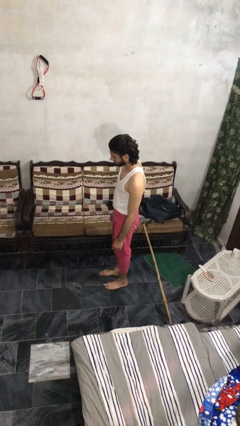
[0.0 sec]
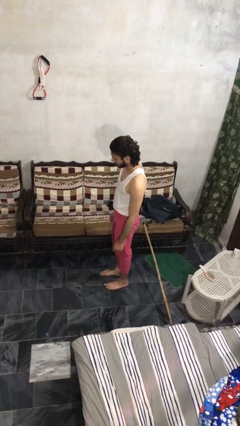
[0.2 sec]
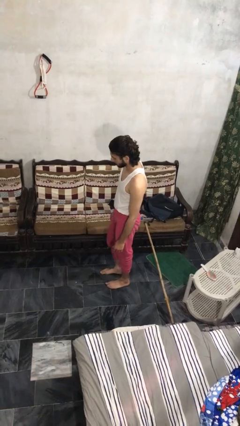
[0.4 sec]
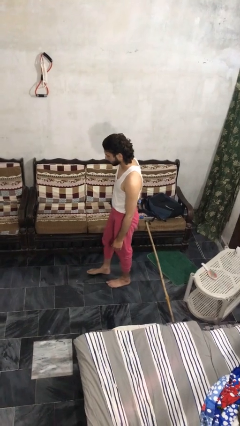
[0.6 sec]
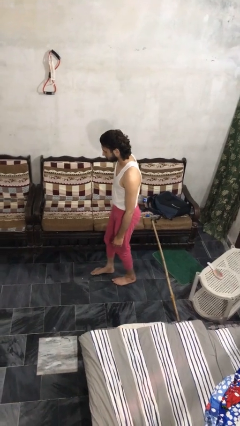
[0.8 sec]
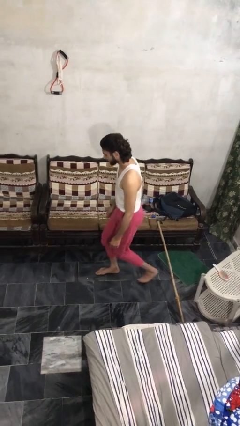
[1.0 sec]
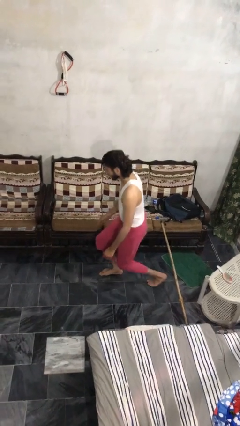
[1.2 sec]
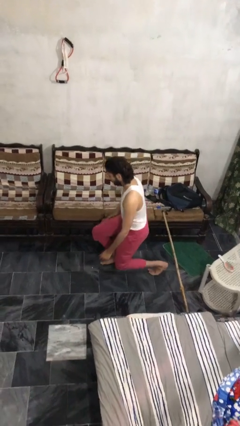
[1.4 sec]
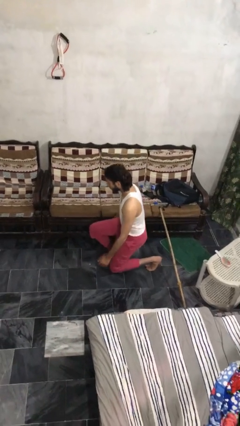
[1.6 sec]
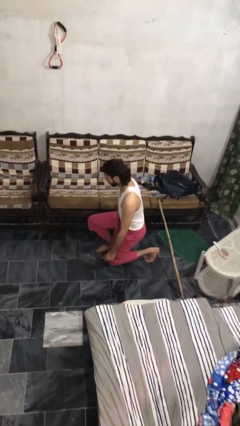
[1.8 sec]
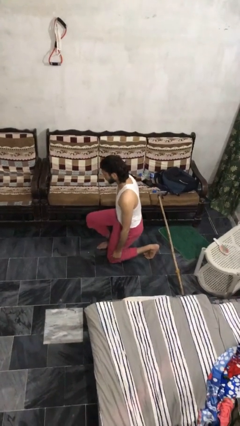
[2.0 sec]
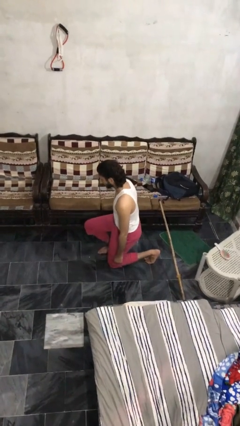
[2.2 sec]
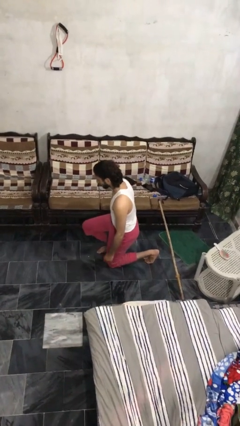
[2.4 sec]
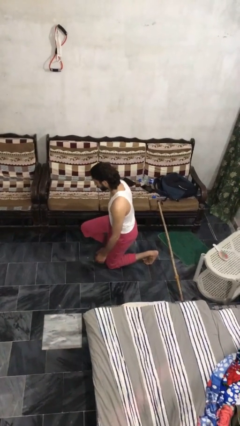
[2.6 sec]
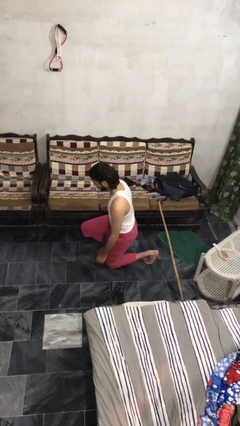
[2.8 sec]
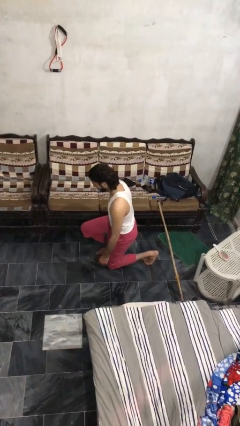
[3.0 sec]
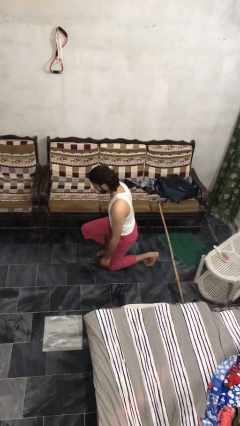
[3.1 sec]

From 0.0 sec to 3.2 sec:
person kneels

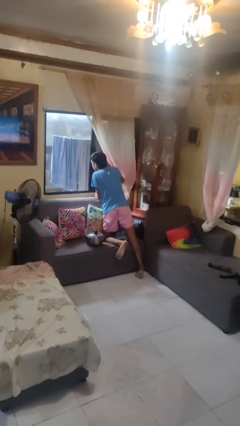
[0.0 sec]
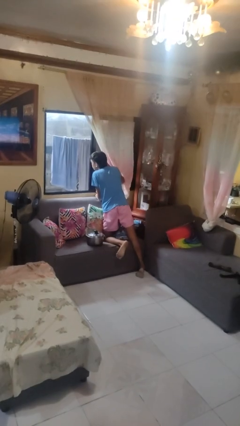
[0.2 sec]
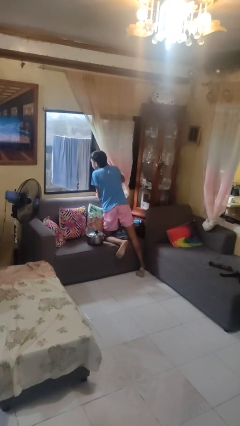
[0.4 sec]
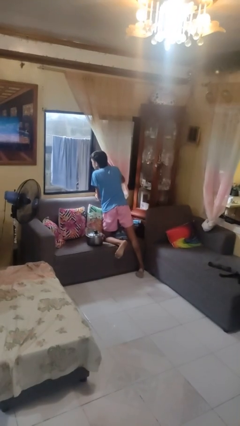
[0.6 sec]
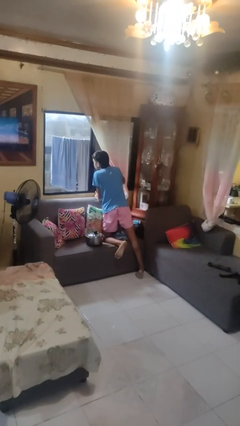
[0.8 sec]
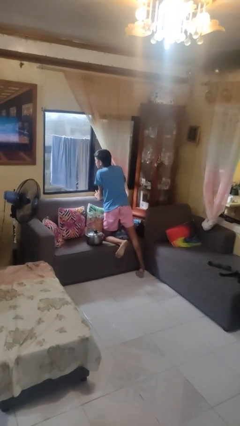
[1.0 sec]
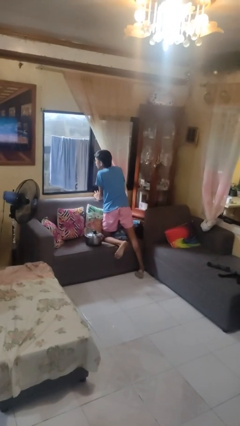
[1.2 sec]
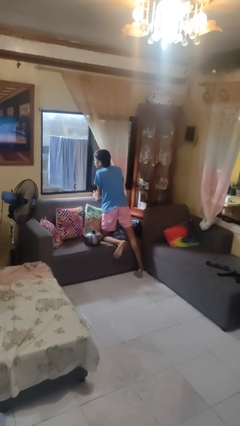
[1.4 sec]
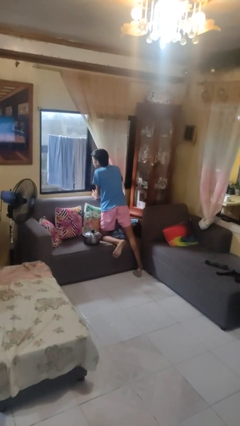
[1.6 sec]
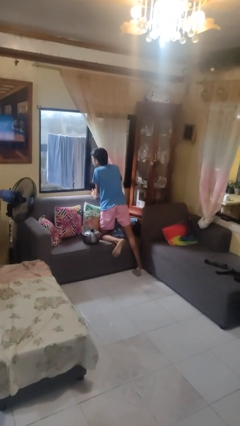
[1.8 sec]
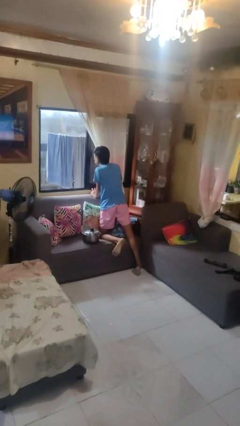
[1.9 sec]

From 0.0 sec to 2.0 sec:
person taps object with finger

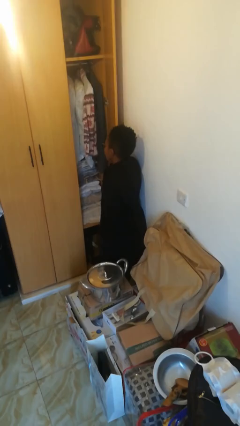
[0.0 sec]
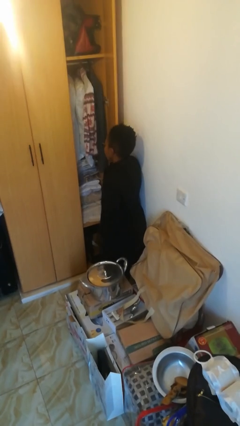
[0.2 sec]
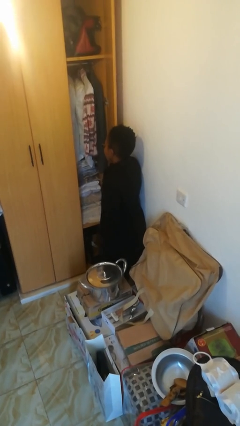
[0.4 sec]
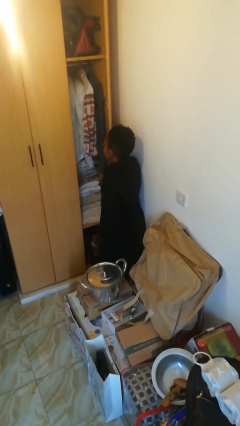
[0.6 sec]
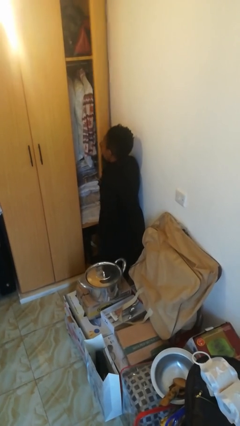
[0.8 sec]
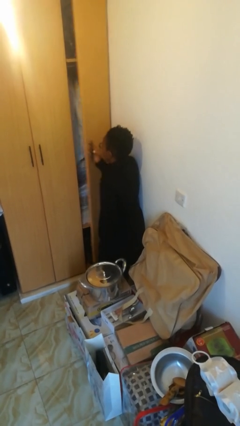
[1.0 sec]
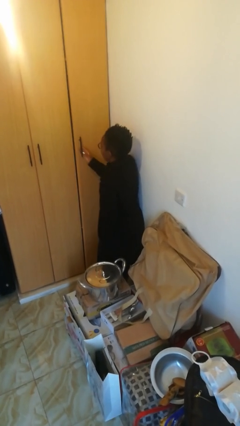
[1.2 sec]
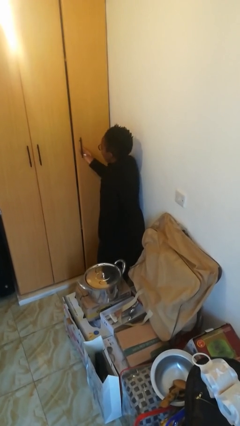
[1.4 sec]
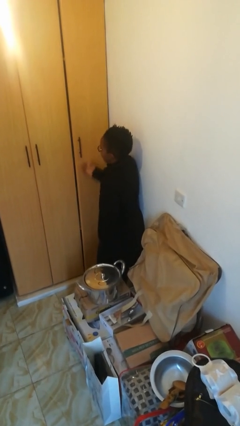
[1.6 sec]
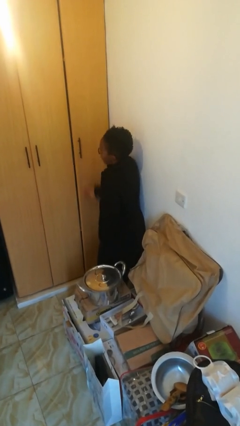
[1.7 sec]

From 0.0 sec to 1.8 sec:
person closes closet door

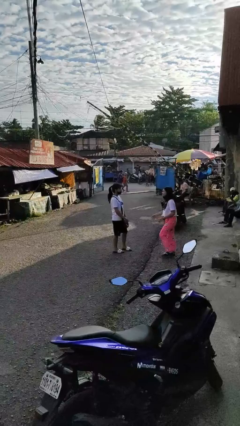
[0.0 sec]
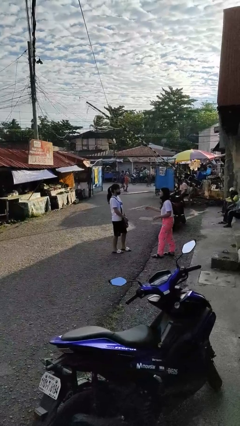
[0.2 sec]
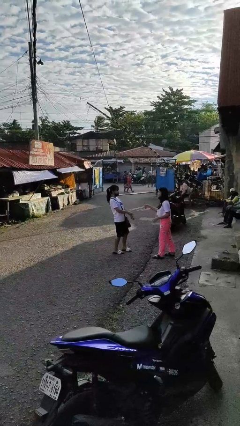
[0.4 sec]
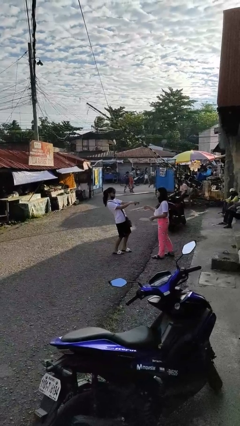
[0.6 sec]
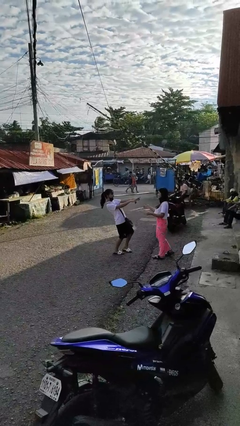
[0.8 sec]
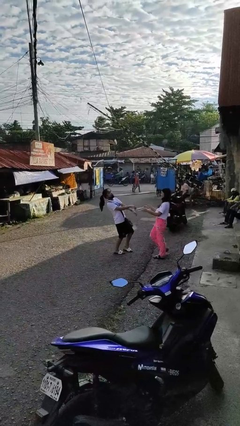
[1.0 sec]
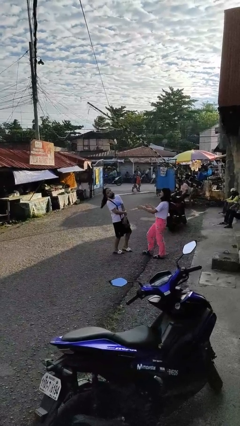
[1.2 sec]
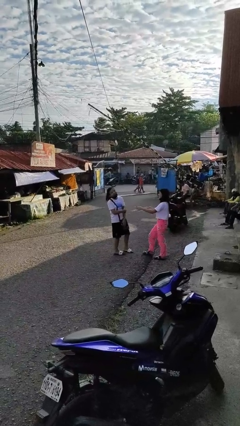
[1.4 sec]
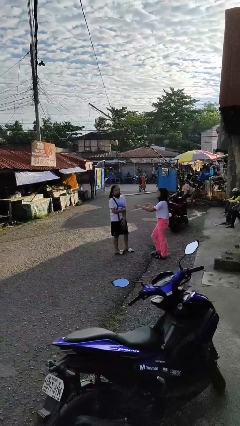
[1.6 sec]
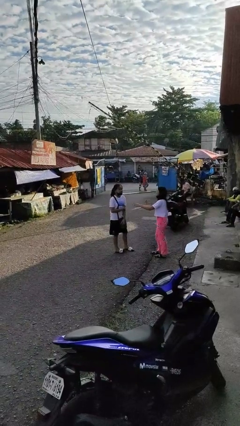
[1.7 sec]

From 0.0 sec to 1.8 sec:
person laughs with person

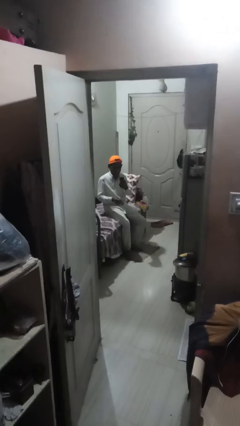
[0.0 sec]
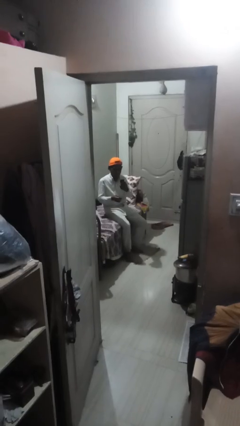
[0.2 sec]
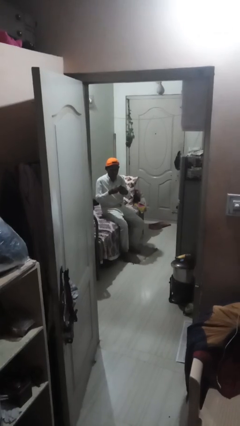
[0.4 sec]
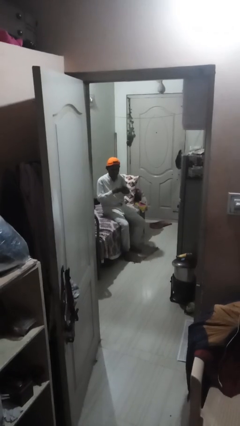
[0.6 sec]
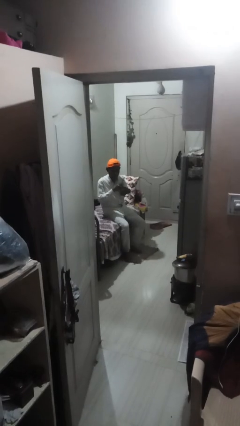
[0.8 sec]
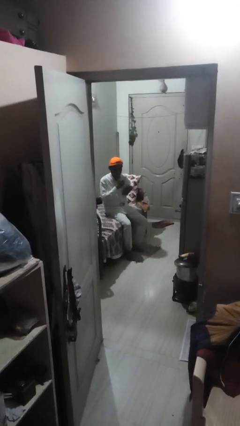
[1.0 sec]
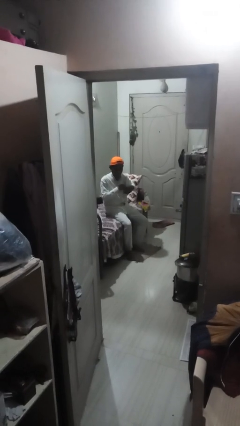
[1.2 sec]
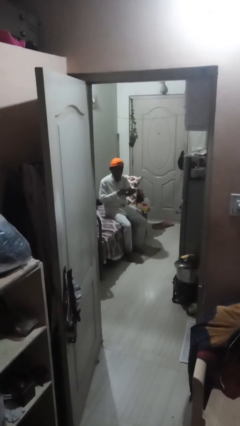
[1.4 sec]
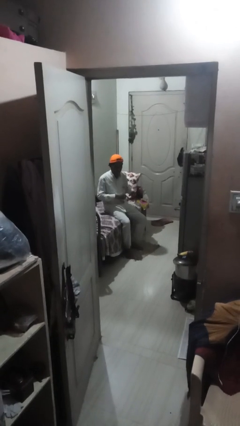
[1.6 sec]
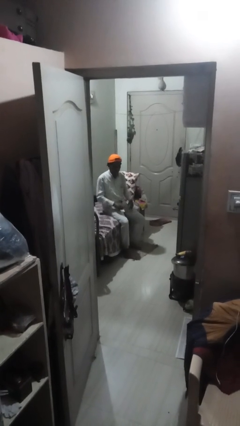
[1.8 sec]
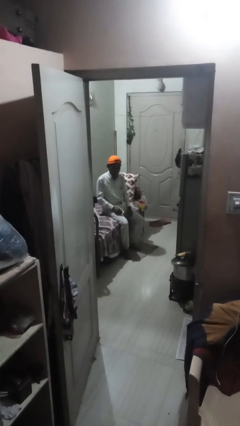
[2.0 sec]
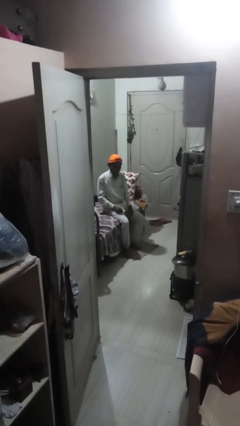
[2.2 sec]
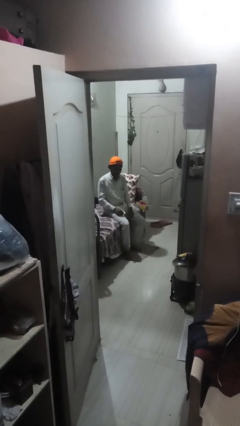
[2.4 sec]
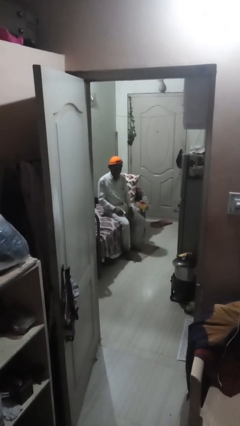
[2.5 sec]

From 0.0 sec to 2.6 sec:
person puts phone into pocket

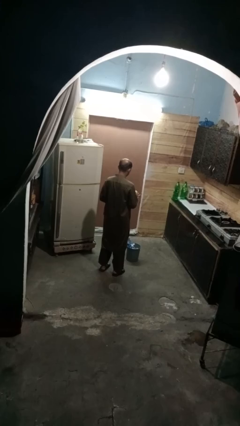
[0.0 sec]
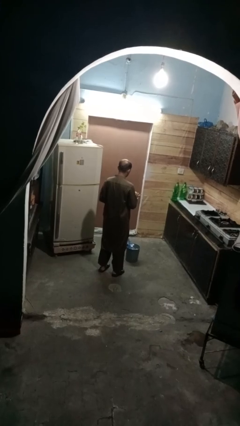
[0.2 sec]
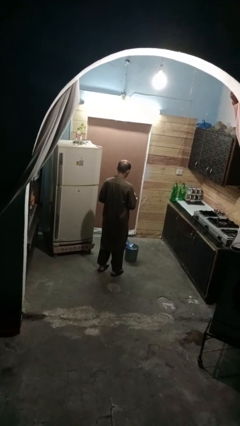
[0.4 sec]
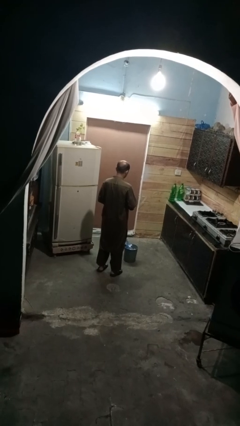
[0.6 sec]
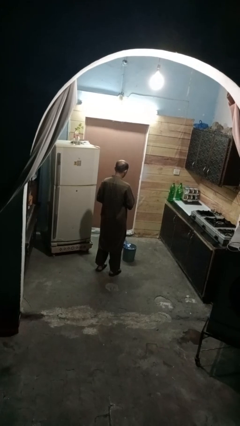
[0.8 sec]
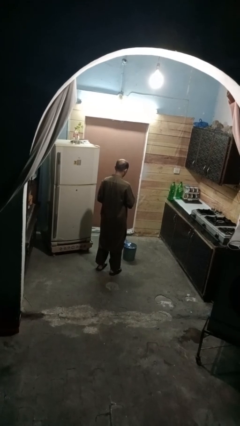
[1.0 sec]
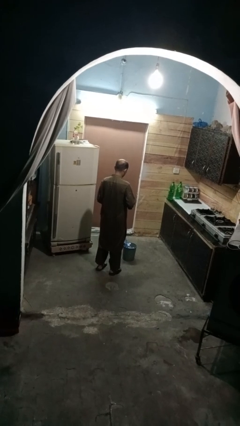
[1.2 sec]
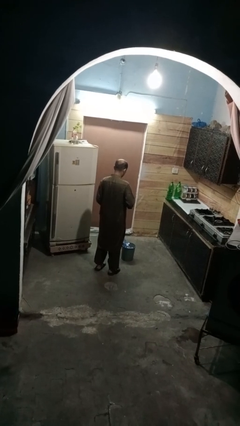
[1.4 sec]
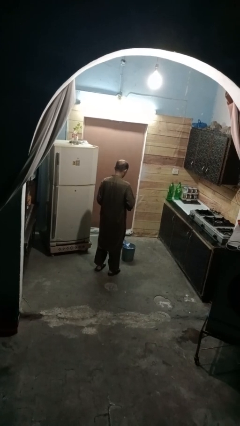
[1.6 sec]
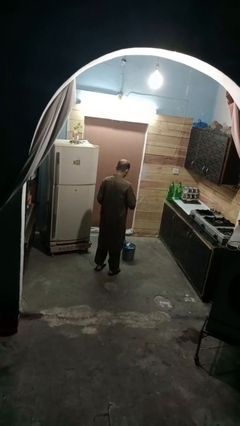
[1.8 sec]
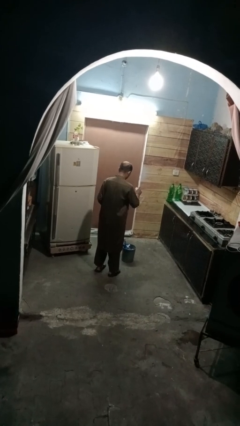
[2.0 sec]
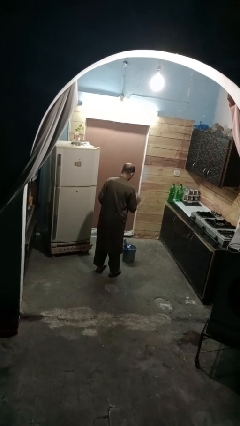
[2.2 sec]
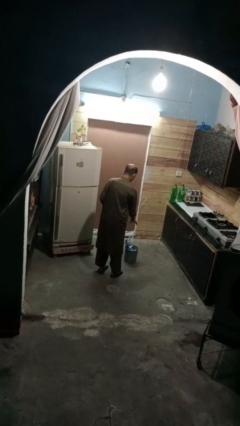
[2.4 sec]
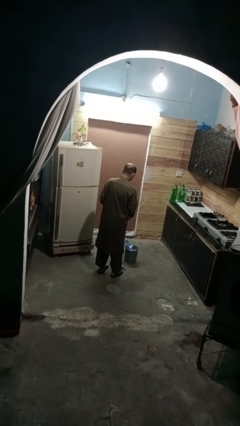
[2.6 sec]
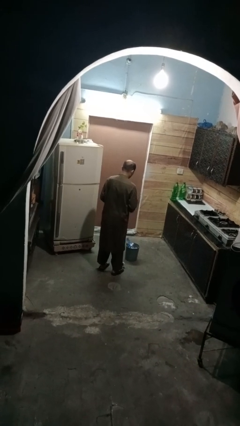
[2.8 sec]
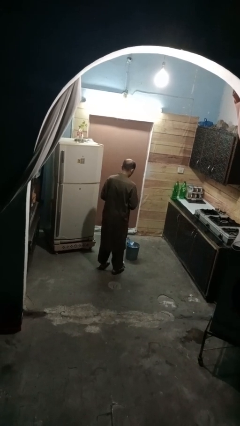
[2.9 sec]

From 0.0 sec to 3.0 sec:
person discards trash

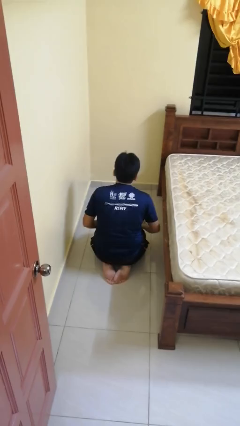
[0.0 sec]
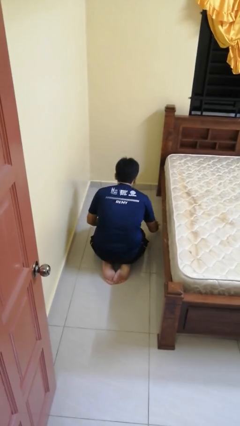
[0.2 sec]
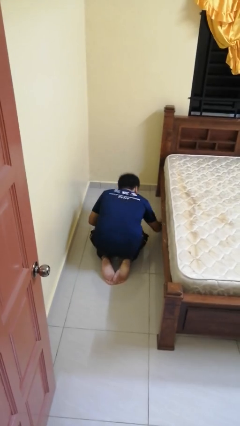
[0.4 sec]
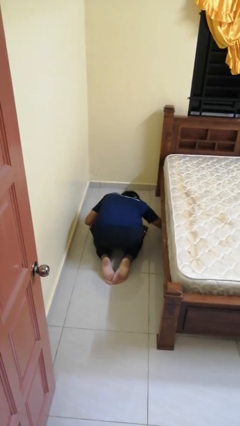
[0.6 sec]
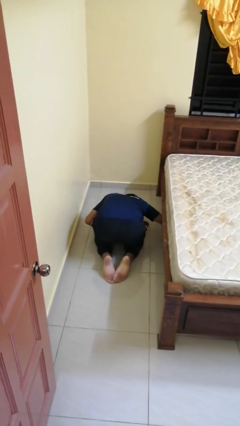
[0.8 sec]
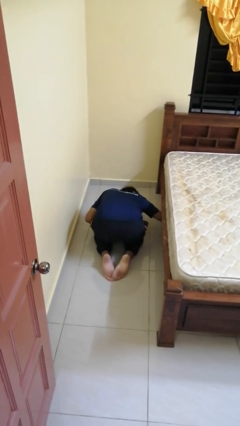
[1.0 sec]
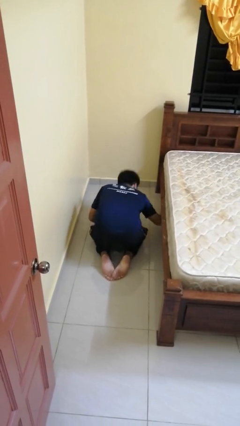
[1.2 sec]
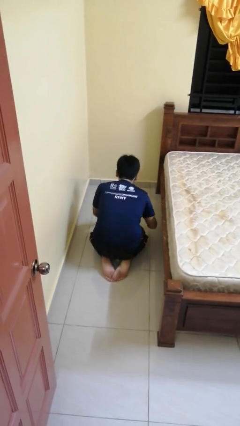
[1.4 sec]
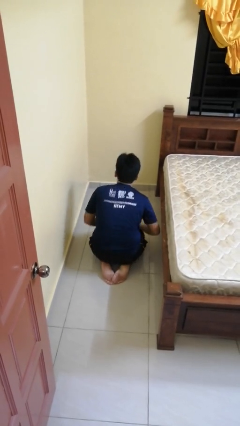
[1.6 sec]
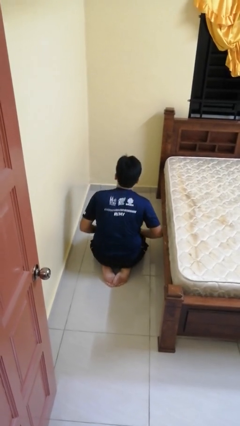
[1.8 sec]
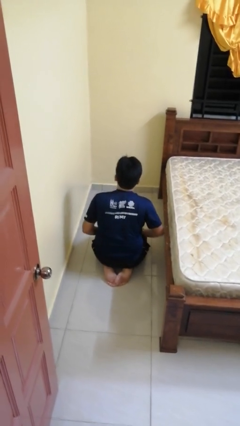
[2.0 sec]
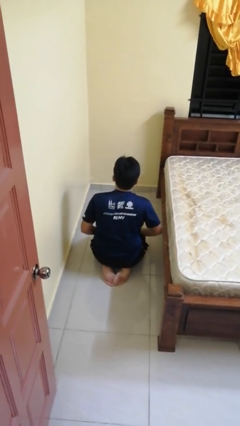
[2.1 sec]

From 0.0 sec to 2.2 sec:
person searches under bed
